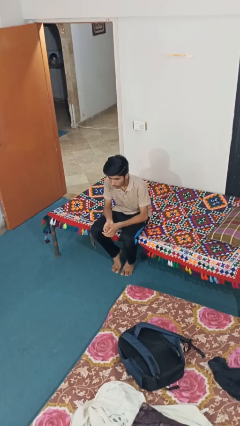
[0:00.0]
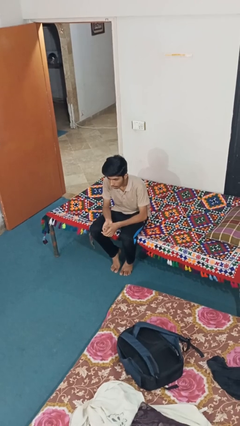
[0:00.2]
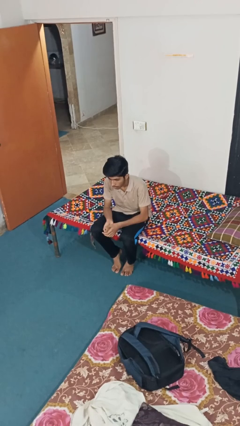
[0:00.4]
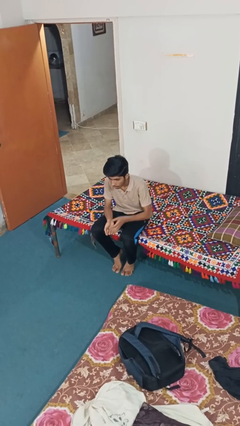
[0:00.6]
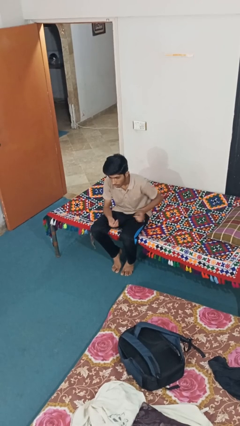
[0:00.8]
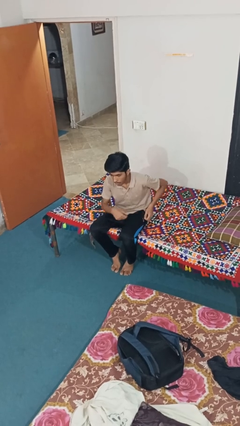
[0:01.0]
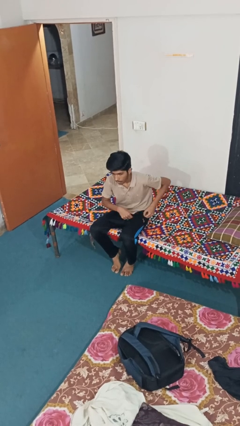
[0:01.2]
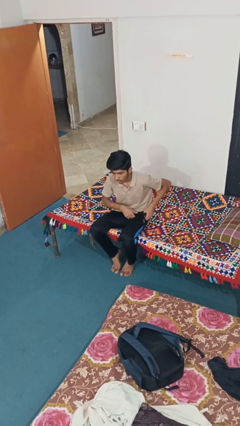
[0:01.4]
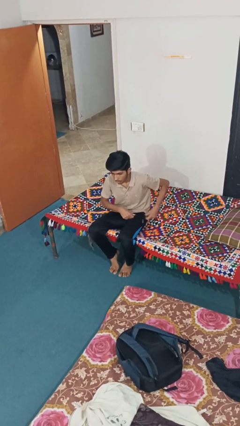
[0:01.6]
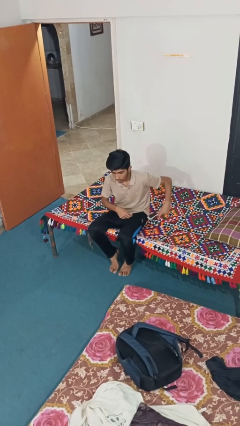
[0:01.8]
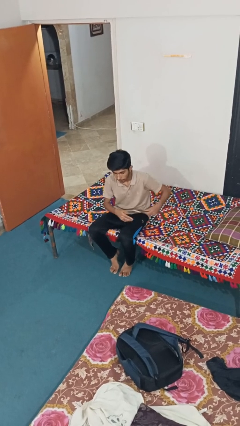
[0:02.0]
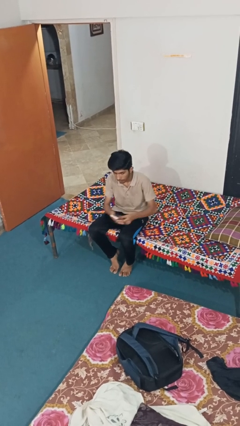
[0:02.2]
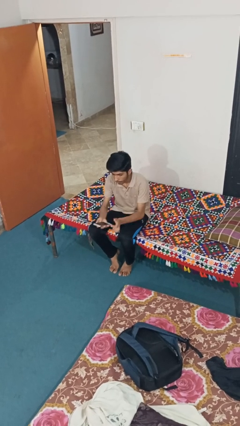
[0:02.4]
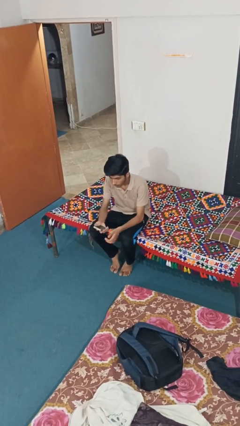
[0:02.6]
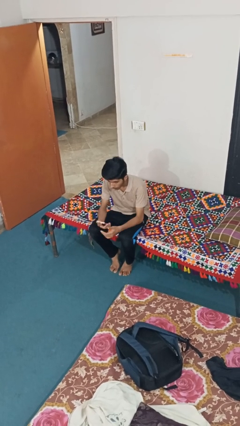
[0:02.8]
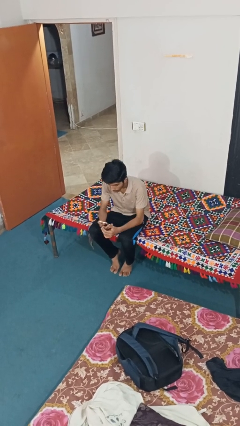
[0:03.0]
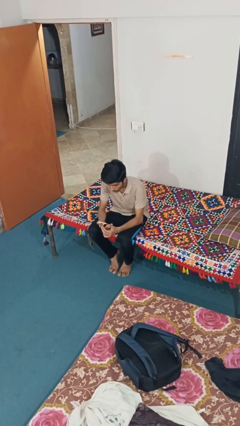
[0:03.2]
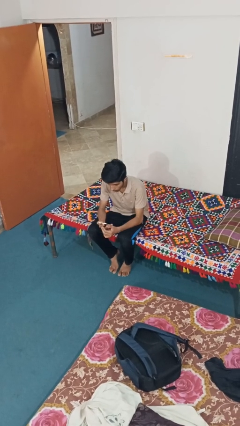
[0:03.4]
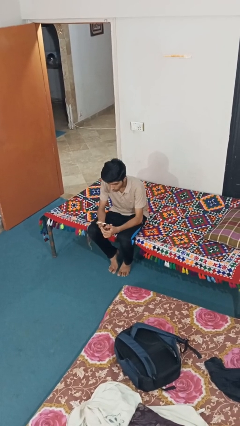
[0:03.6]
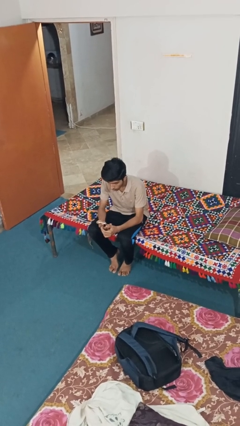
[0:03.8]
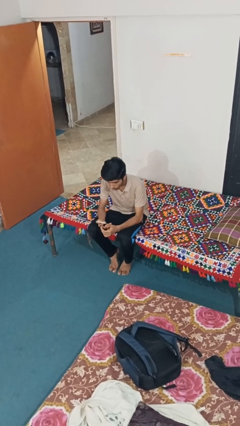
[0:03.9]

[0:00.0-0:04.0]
person takes phone from pocket

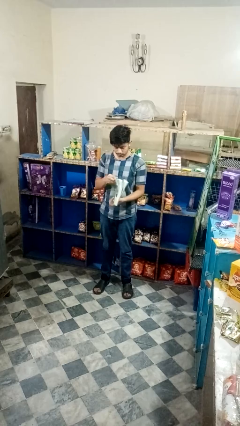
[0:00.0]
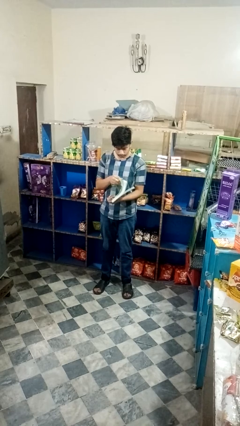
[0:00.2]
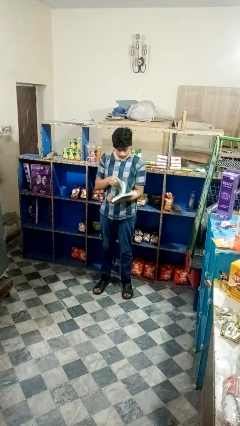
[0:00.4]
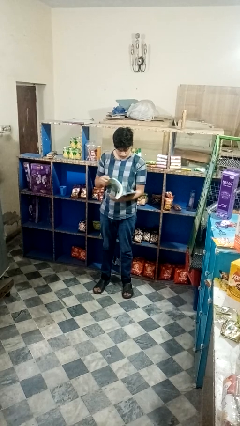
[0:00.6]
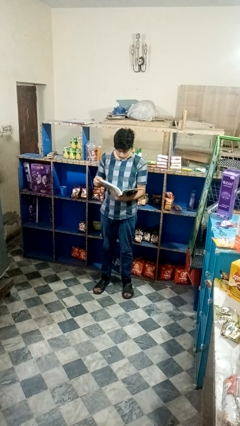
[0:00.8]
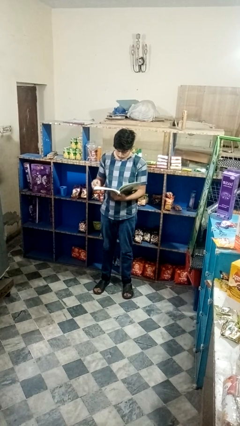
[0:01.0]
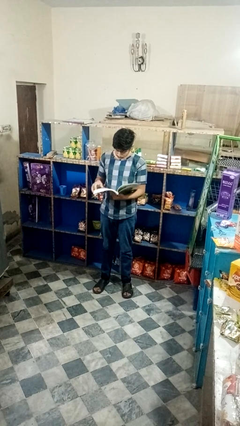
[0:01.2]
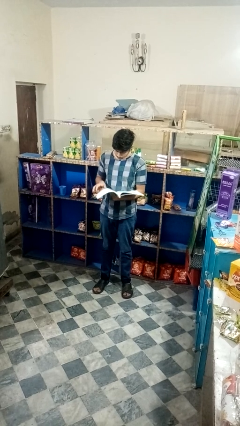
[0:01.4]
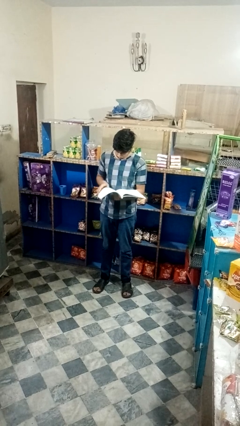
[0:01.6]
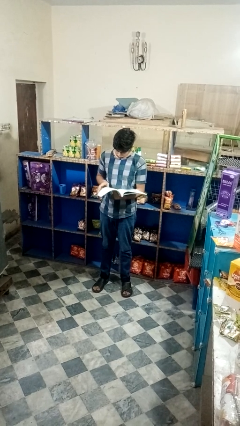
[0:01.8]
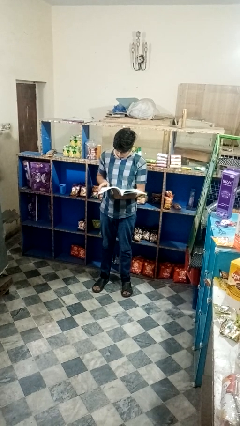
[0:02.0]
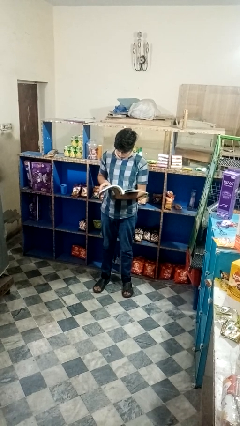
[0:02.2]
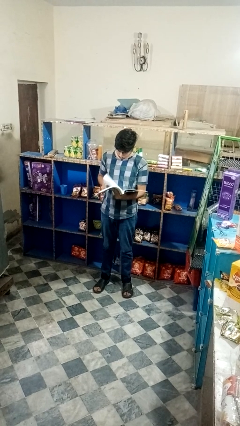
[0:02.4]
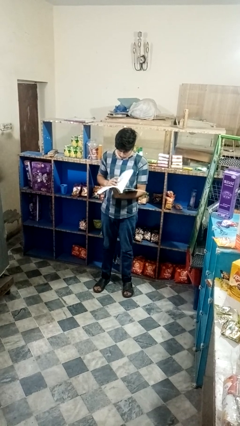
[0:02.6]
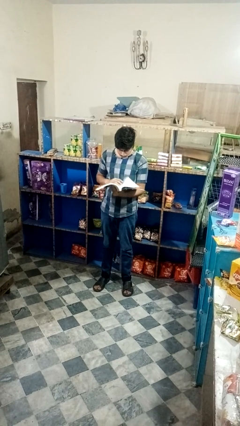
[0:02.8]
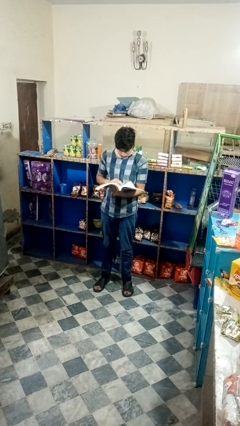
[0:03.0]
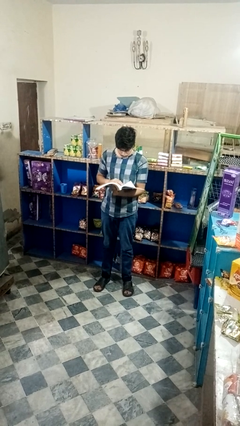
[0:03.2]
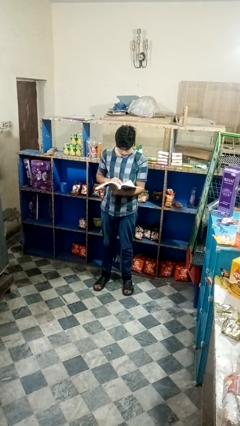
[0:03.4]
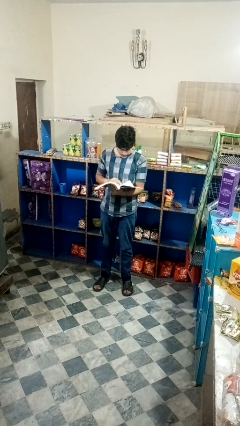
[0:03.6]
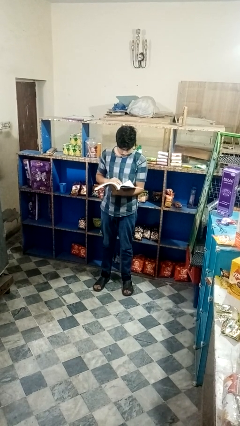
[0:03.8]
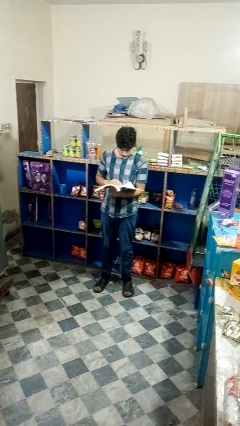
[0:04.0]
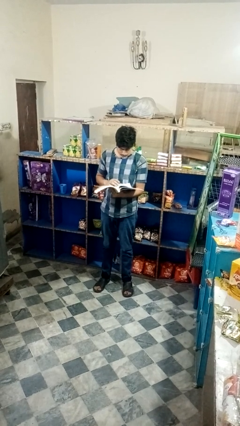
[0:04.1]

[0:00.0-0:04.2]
person reads magazine

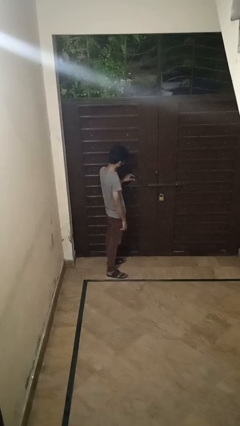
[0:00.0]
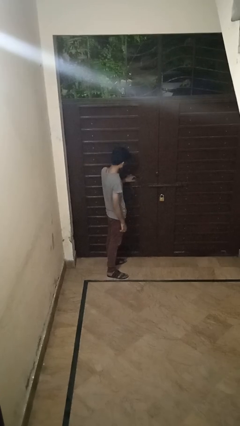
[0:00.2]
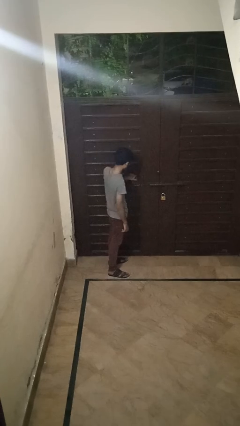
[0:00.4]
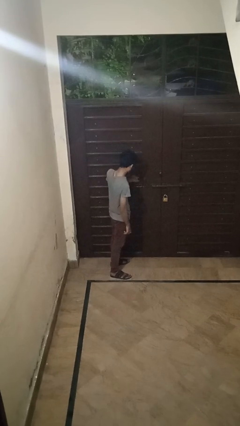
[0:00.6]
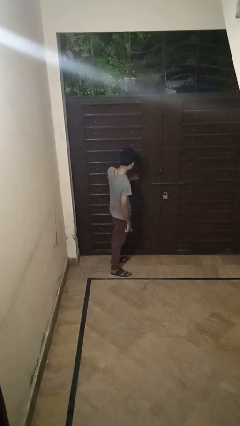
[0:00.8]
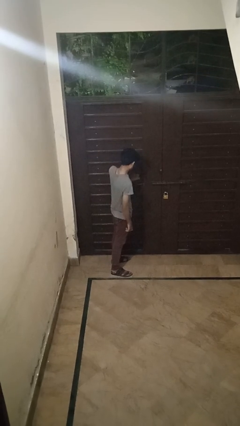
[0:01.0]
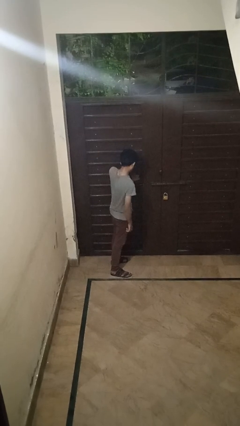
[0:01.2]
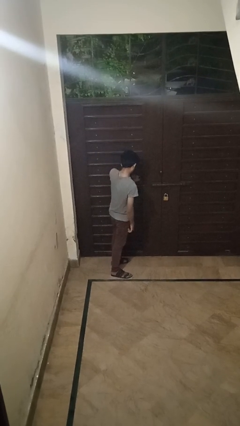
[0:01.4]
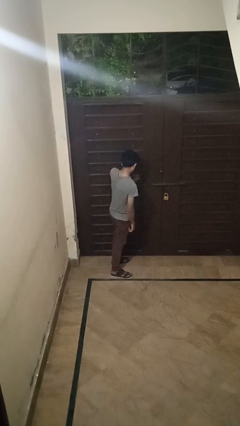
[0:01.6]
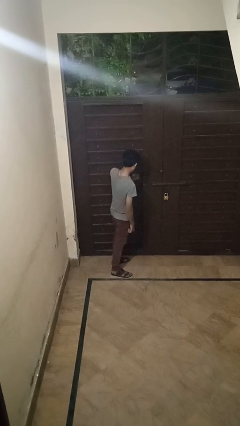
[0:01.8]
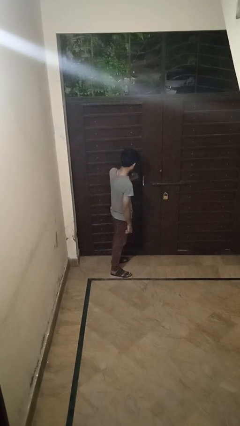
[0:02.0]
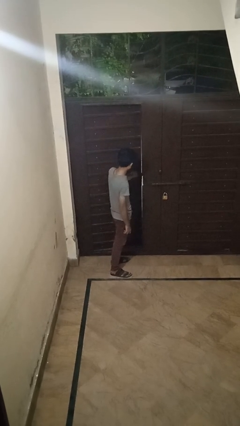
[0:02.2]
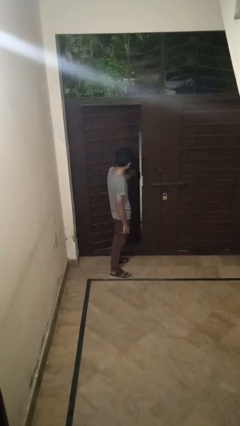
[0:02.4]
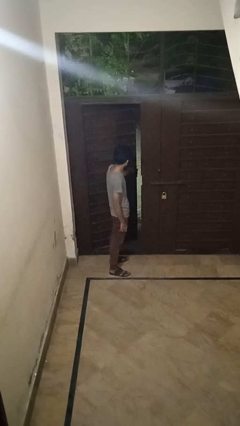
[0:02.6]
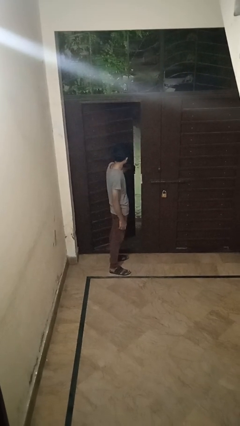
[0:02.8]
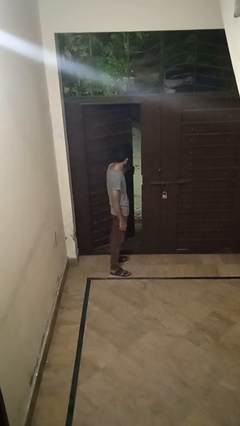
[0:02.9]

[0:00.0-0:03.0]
person opens facility door

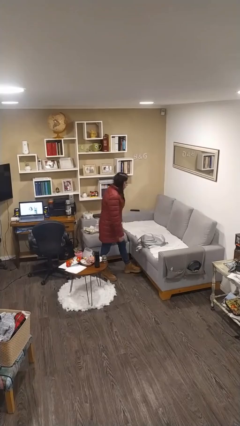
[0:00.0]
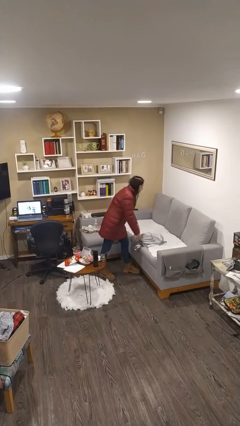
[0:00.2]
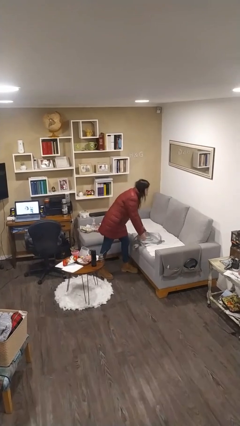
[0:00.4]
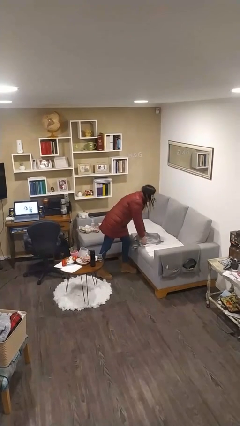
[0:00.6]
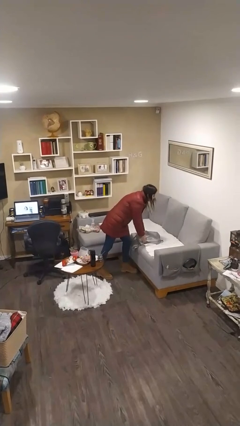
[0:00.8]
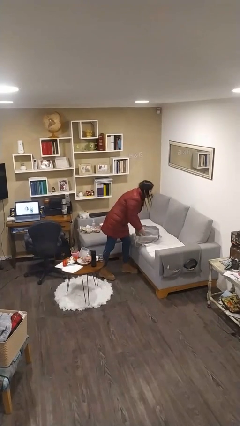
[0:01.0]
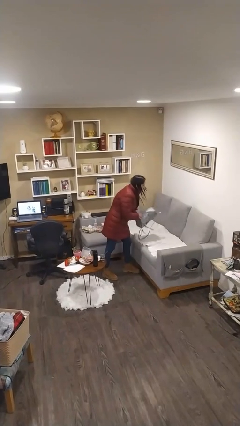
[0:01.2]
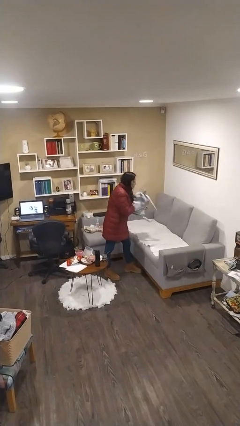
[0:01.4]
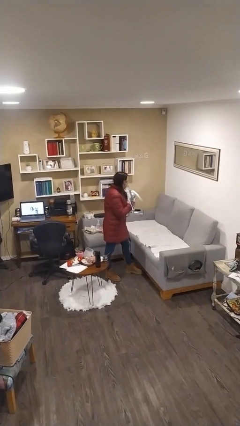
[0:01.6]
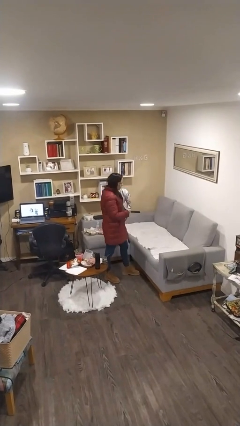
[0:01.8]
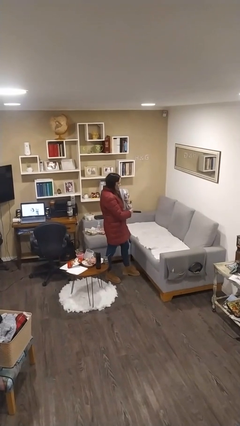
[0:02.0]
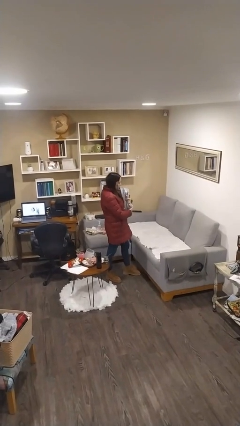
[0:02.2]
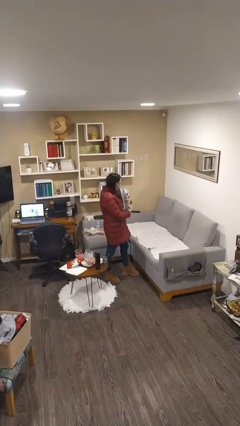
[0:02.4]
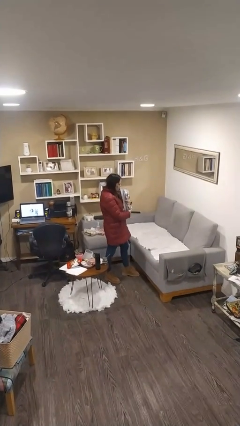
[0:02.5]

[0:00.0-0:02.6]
person picks up object from couch

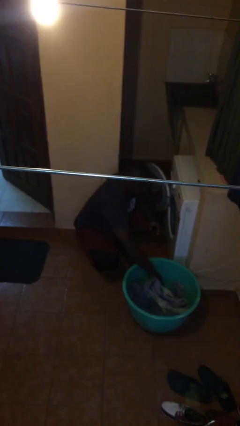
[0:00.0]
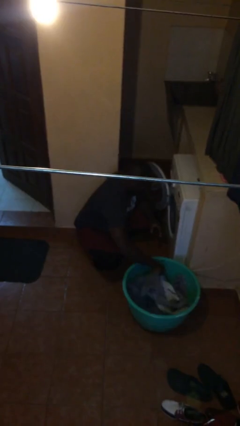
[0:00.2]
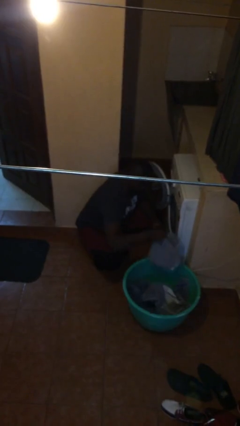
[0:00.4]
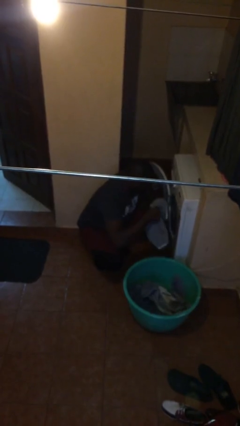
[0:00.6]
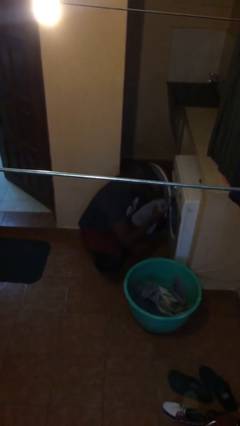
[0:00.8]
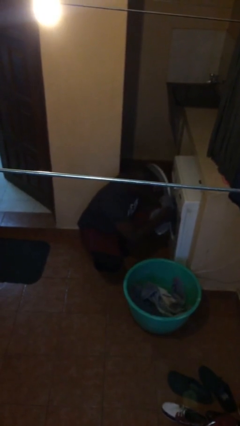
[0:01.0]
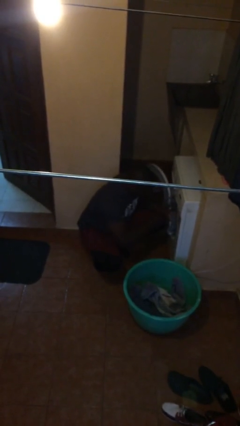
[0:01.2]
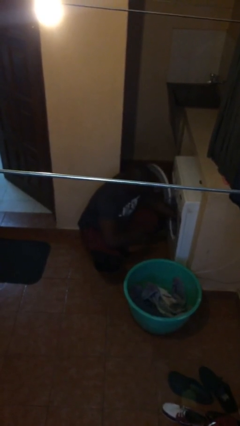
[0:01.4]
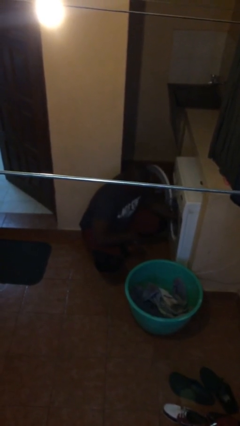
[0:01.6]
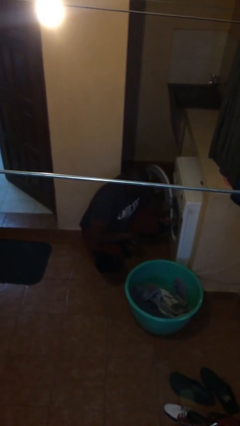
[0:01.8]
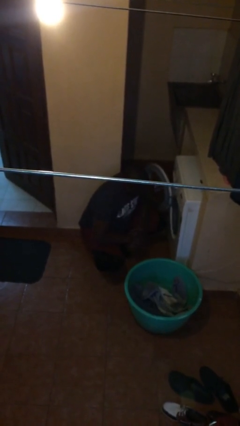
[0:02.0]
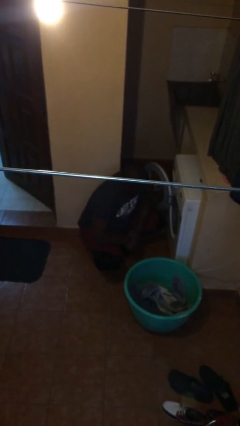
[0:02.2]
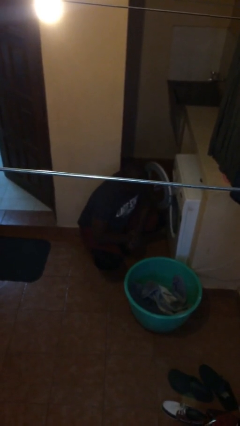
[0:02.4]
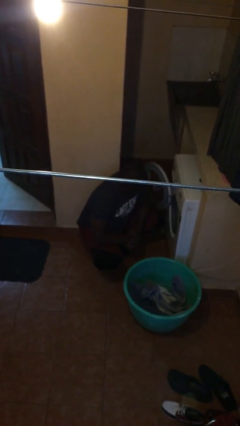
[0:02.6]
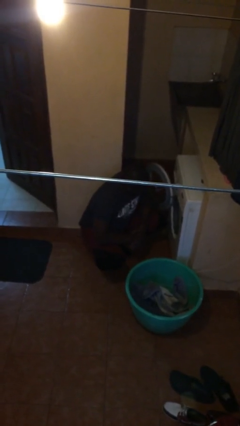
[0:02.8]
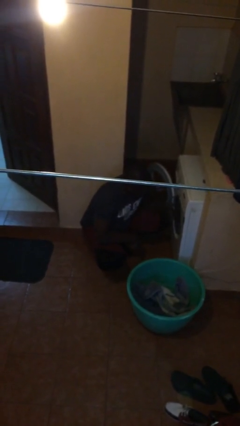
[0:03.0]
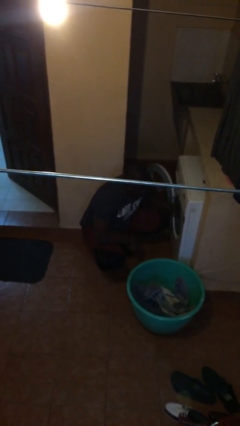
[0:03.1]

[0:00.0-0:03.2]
person loads dryer

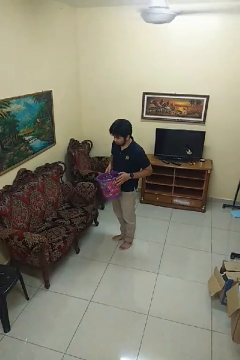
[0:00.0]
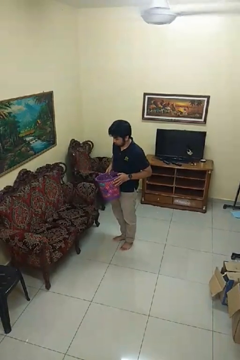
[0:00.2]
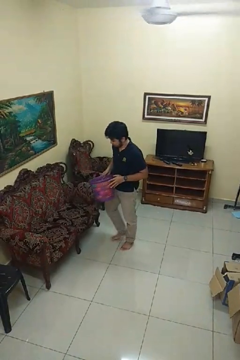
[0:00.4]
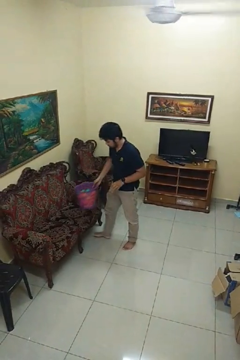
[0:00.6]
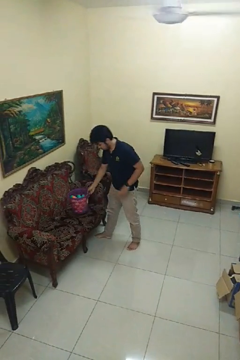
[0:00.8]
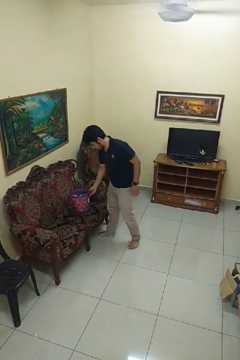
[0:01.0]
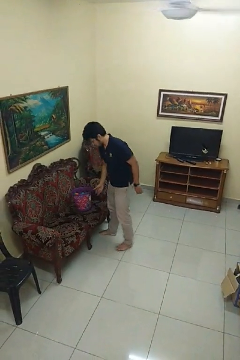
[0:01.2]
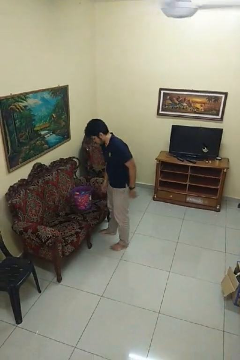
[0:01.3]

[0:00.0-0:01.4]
person puts down object on couch
